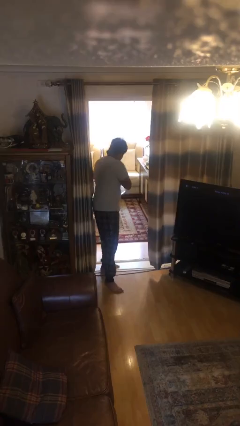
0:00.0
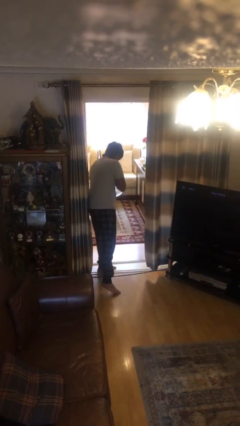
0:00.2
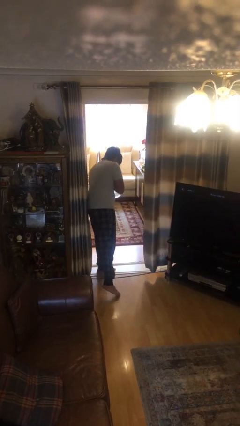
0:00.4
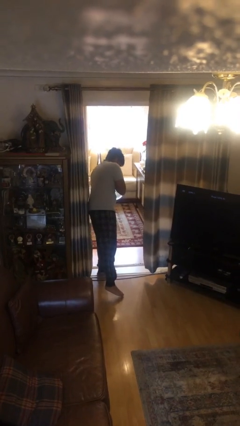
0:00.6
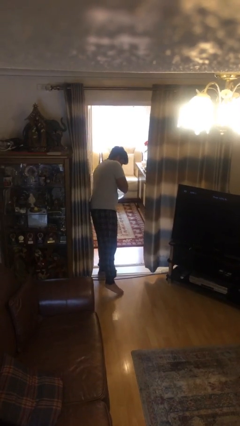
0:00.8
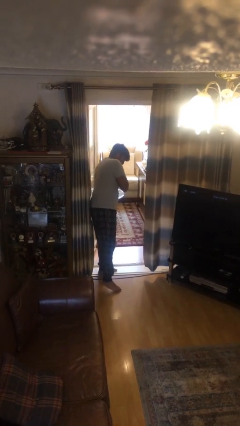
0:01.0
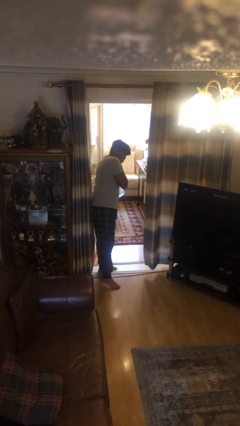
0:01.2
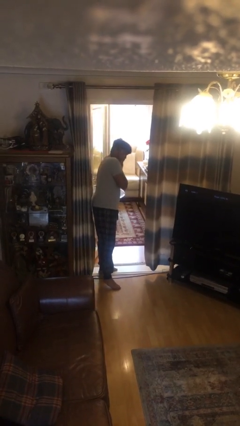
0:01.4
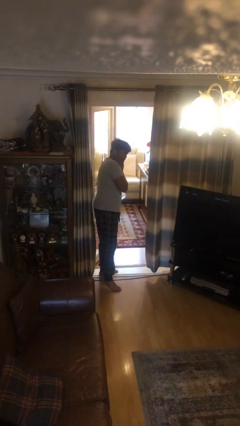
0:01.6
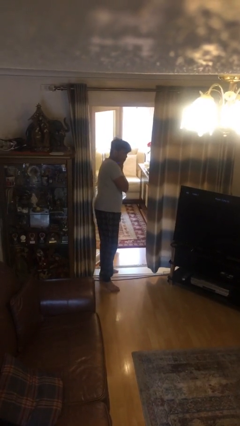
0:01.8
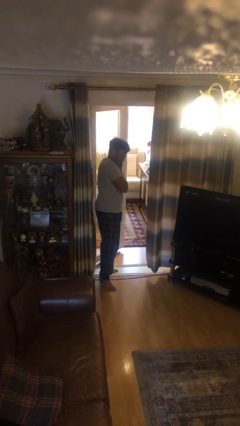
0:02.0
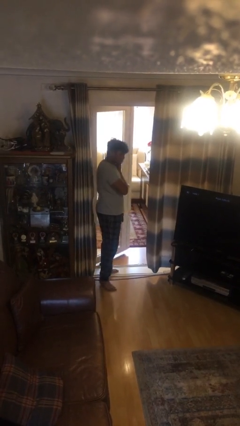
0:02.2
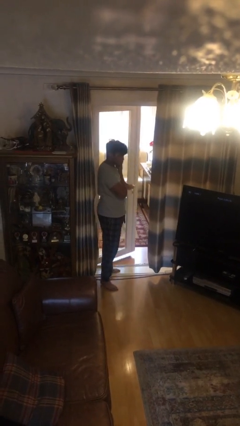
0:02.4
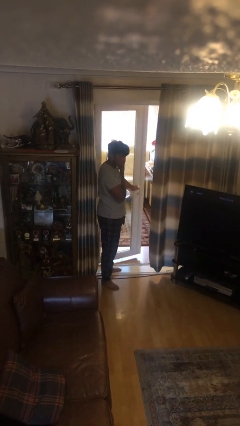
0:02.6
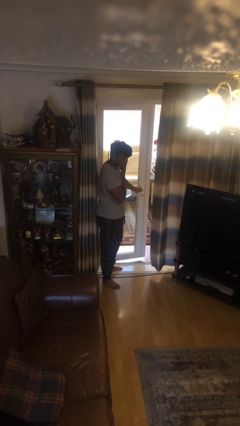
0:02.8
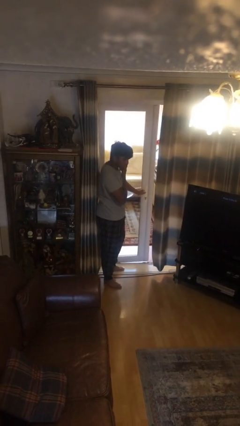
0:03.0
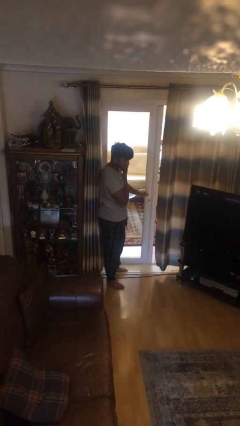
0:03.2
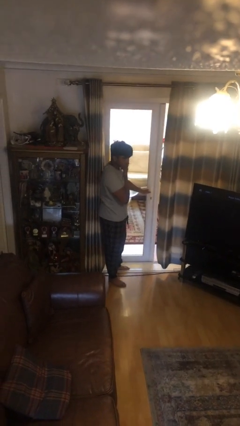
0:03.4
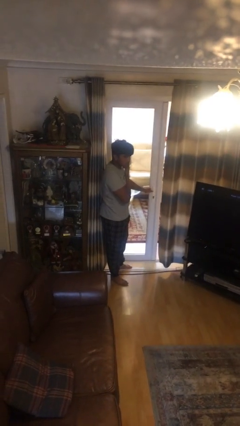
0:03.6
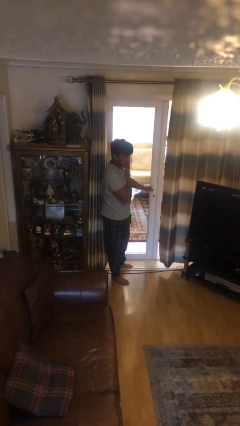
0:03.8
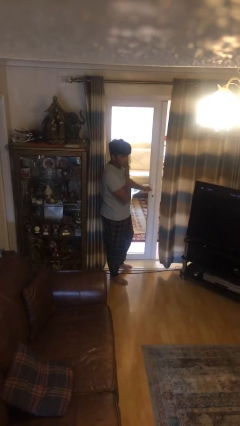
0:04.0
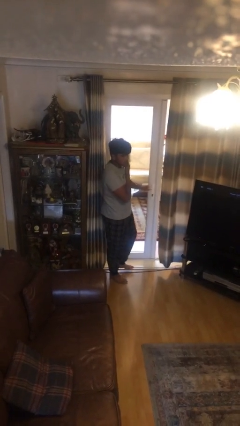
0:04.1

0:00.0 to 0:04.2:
person closes facility door

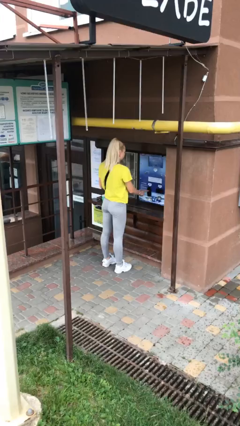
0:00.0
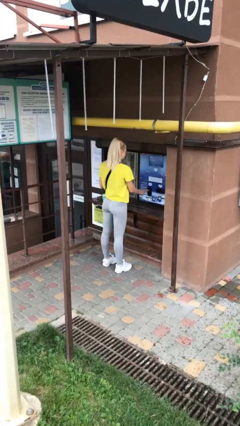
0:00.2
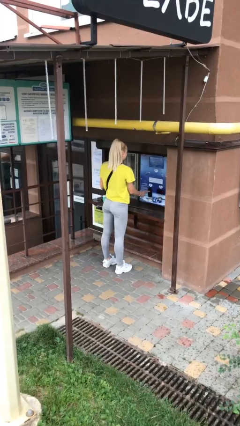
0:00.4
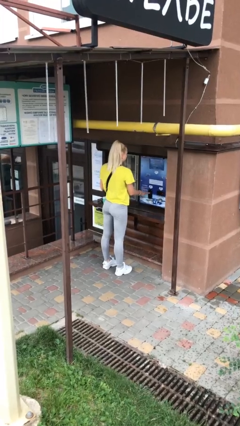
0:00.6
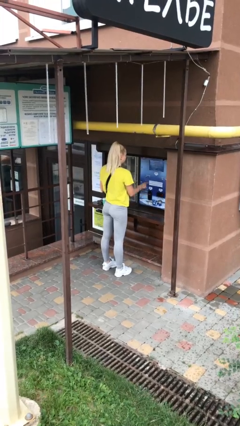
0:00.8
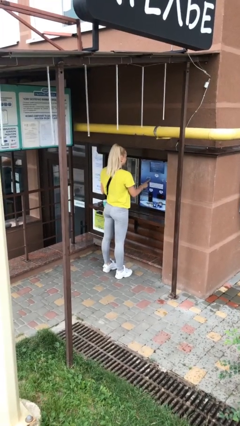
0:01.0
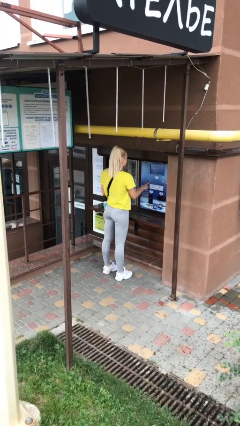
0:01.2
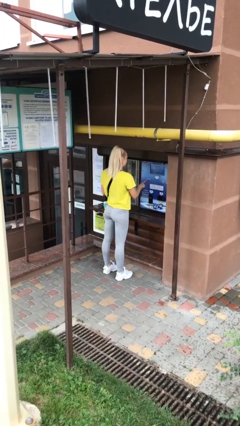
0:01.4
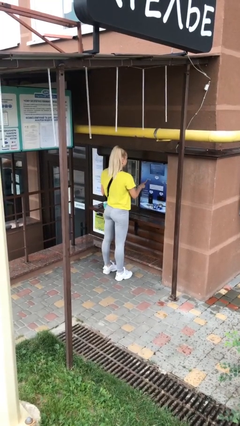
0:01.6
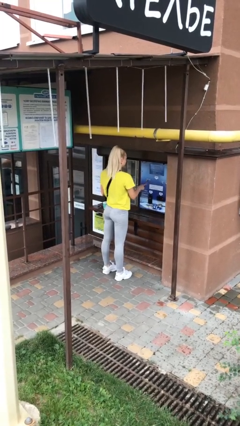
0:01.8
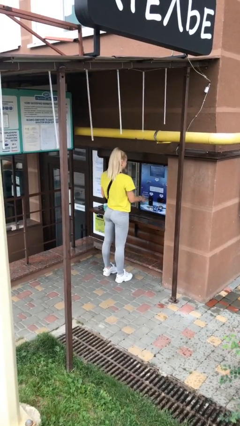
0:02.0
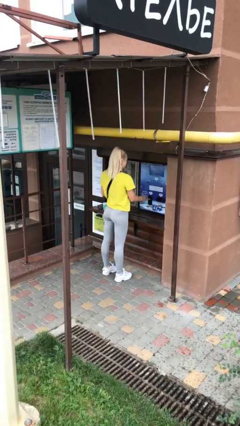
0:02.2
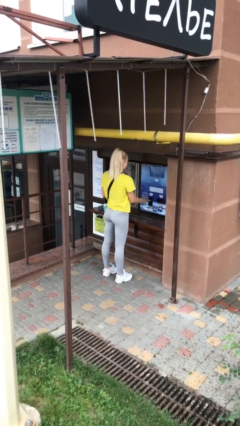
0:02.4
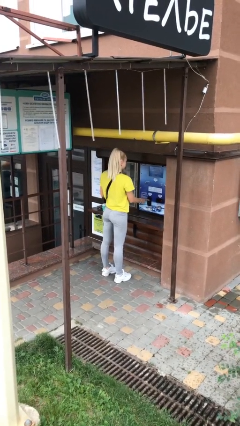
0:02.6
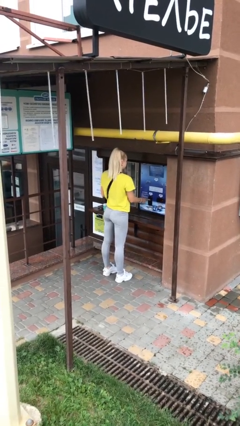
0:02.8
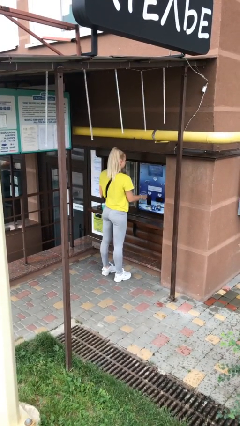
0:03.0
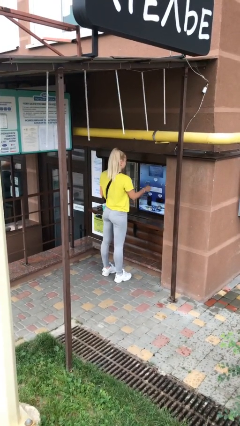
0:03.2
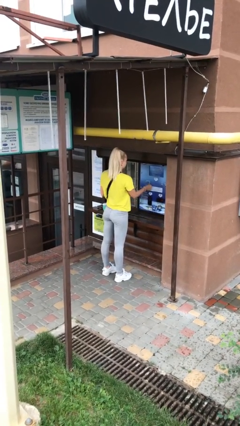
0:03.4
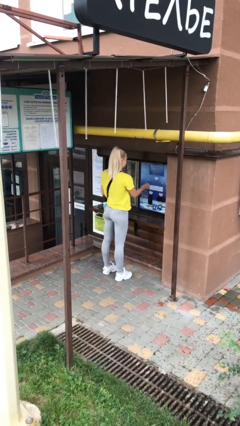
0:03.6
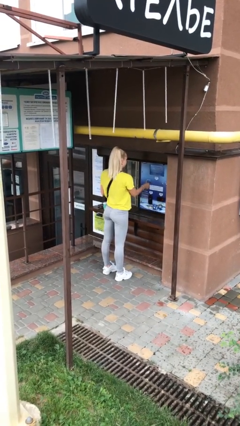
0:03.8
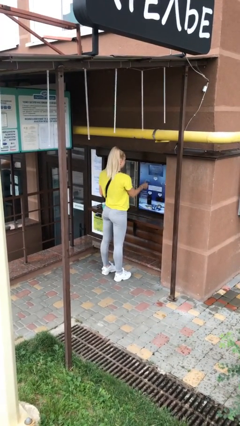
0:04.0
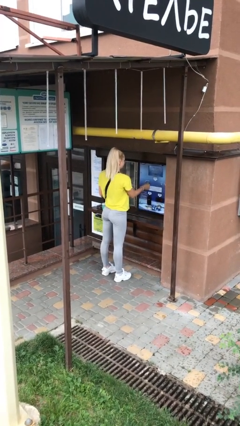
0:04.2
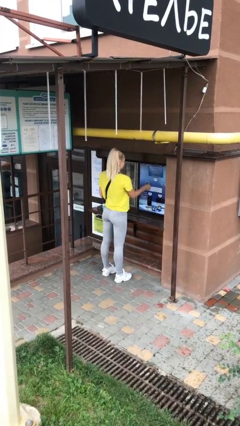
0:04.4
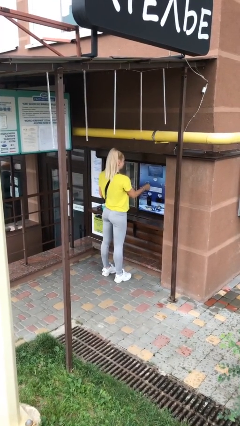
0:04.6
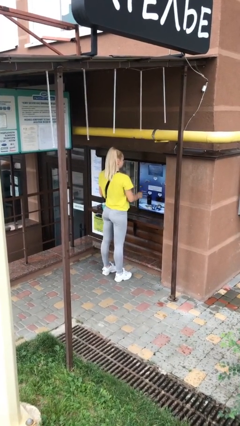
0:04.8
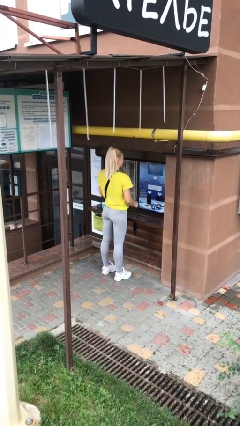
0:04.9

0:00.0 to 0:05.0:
person purchases from machine

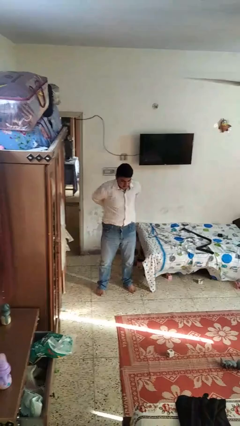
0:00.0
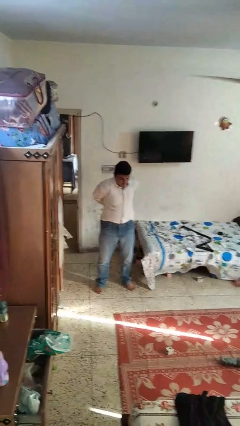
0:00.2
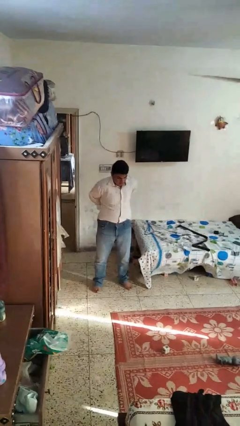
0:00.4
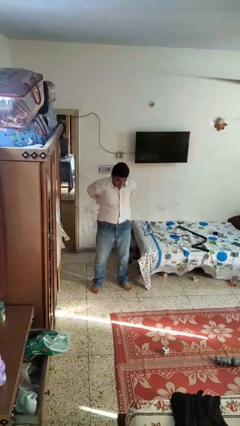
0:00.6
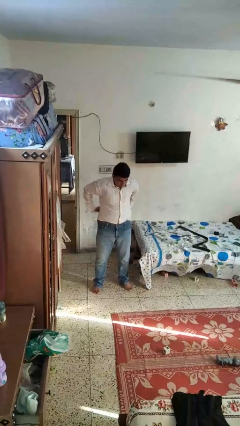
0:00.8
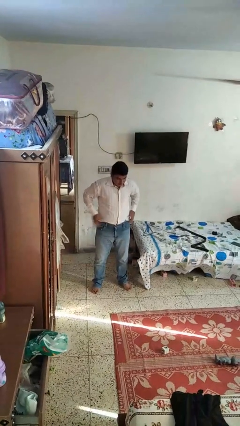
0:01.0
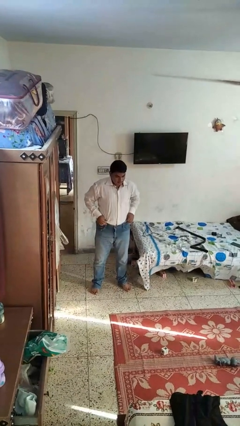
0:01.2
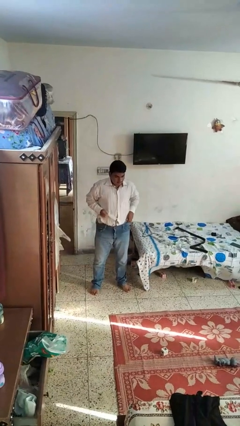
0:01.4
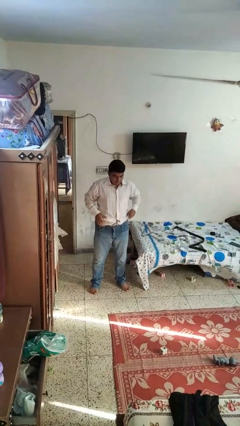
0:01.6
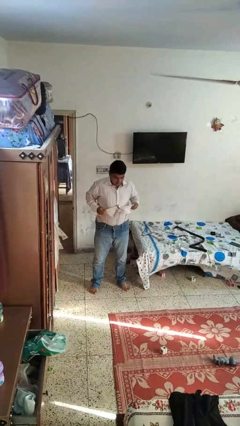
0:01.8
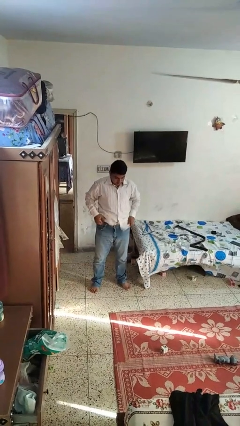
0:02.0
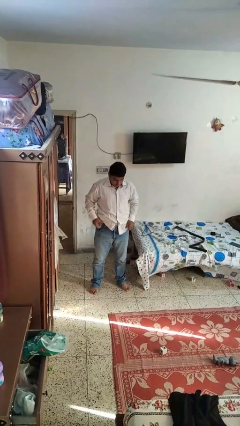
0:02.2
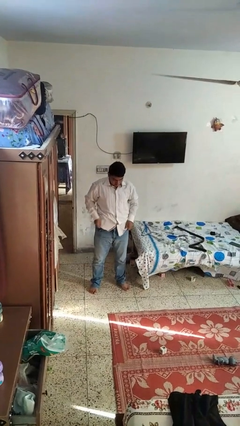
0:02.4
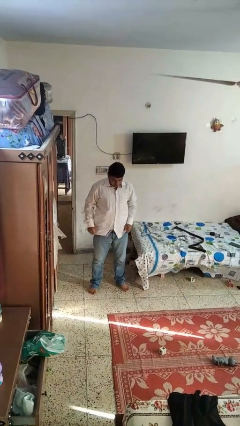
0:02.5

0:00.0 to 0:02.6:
person untucks shirt

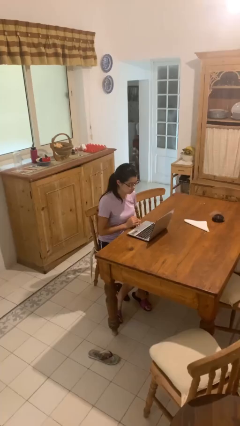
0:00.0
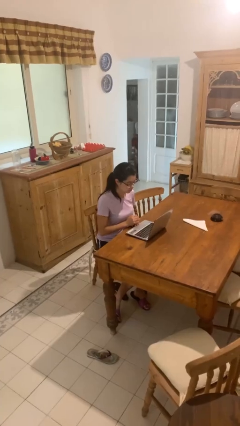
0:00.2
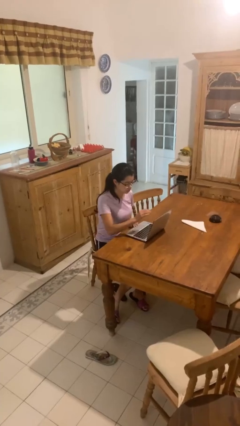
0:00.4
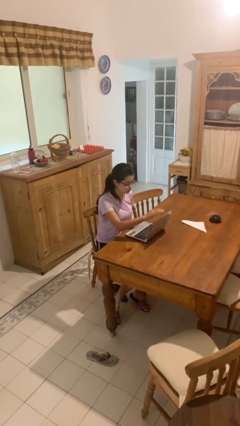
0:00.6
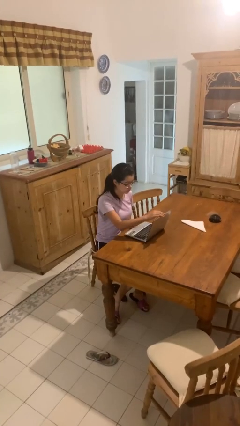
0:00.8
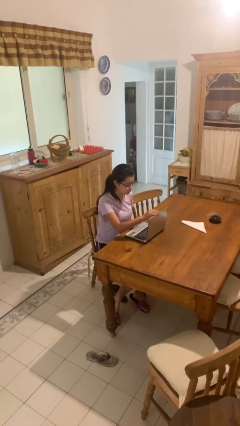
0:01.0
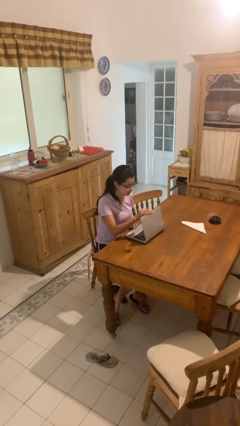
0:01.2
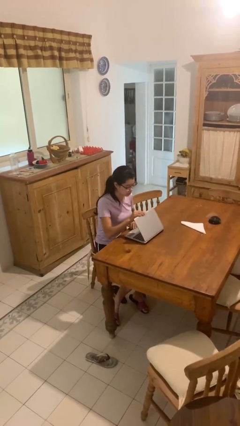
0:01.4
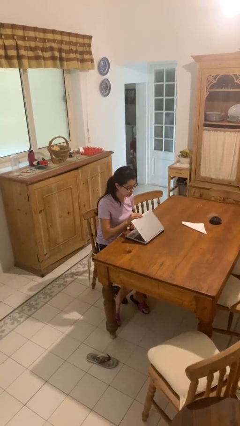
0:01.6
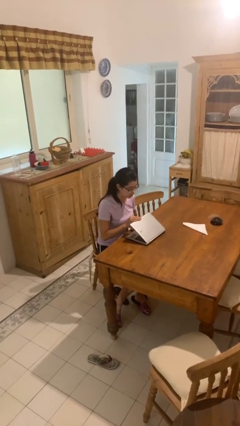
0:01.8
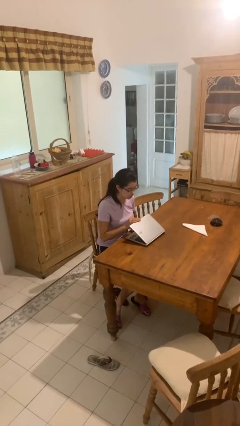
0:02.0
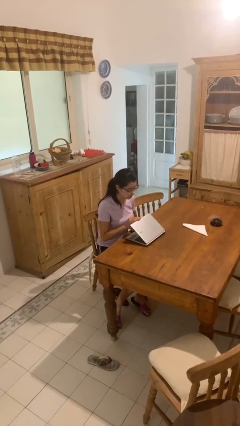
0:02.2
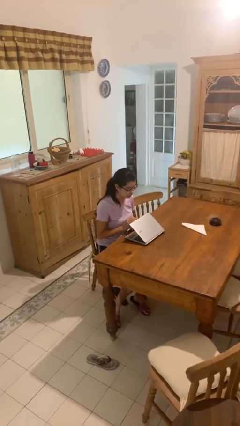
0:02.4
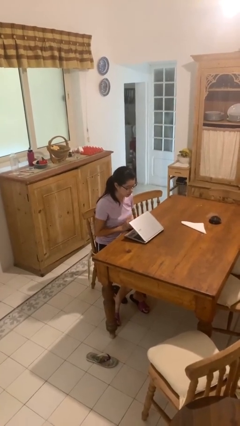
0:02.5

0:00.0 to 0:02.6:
person closes laptop

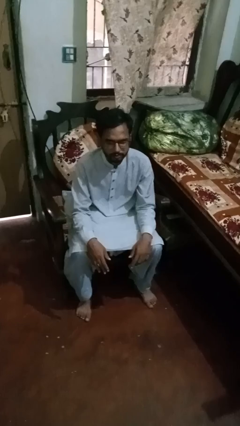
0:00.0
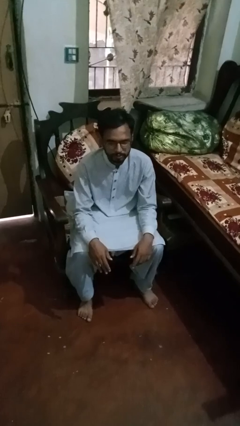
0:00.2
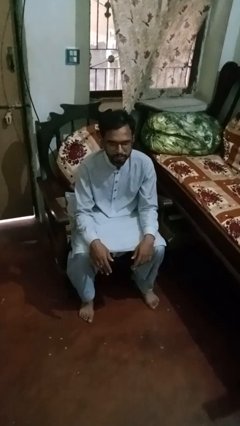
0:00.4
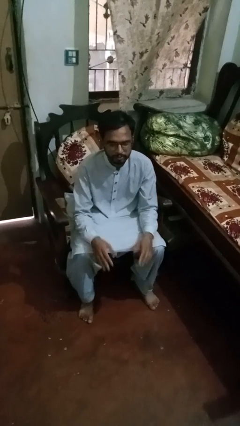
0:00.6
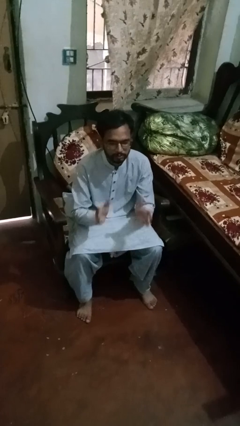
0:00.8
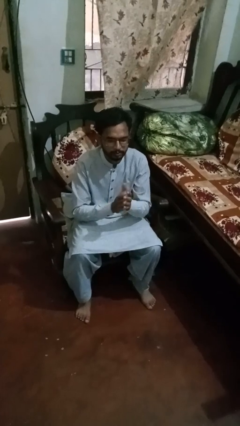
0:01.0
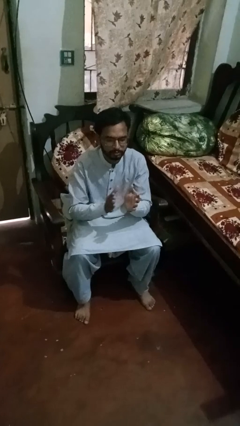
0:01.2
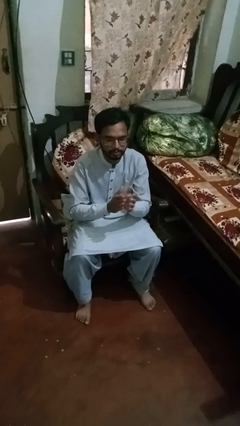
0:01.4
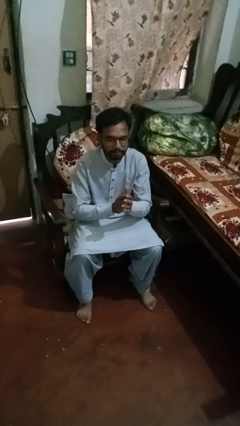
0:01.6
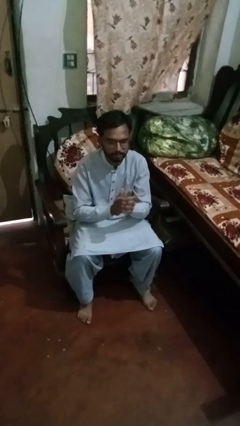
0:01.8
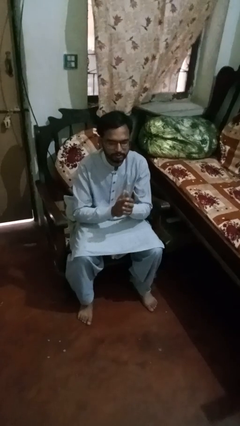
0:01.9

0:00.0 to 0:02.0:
person claps hands

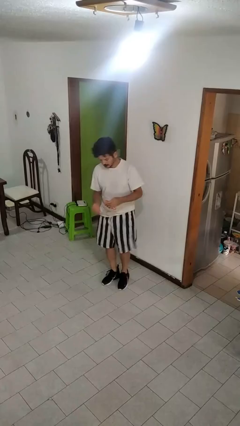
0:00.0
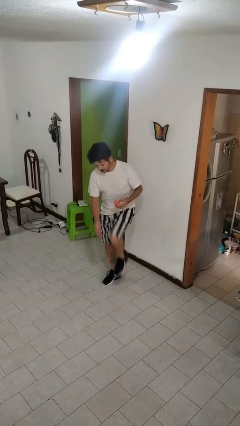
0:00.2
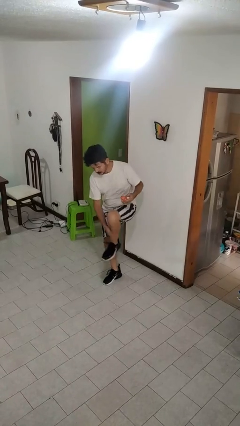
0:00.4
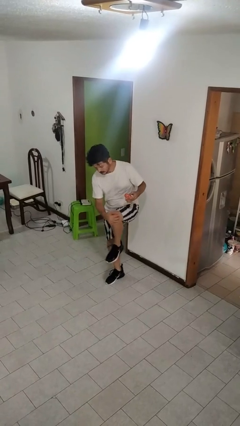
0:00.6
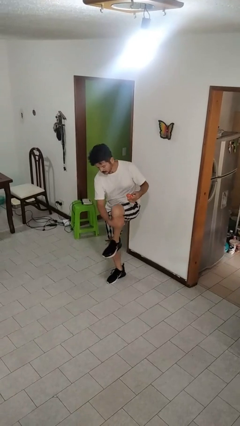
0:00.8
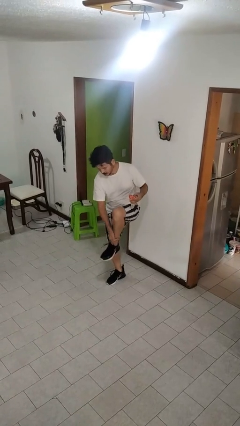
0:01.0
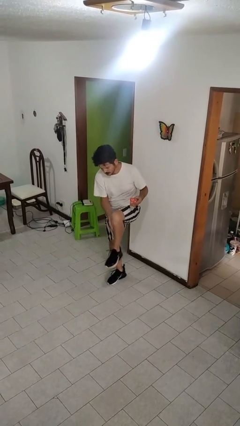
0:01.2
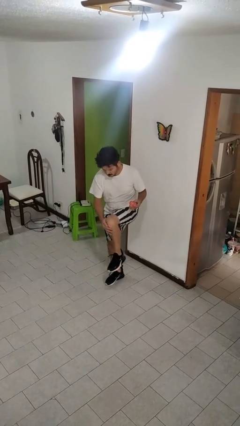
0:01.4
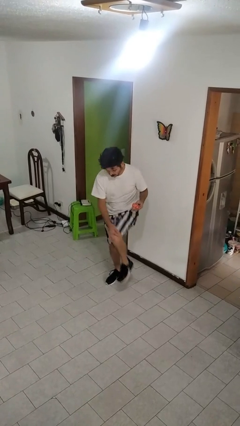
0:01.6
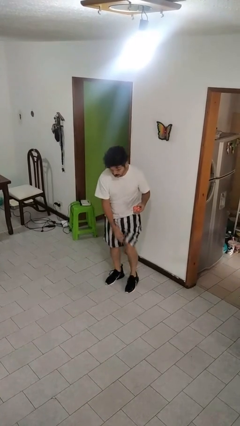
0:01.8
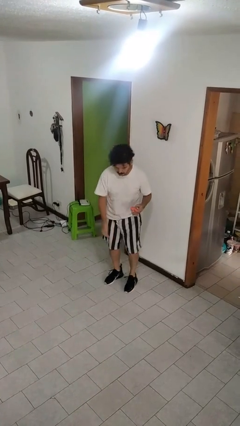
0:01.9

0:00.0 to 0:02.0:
person applies sunscreen
